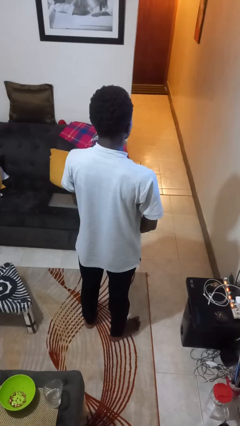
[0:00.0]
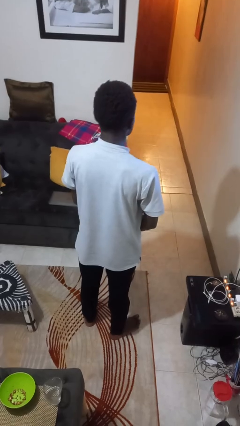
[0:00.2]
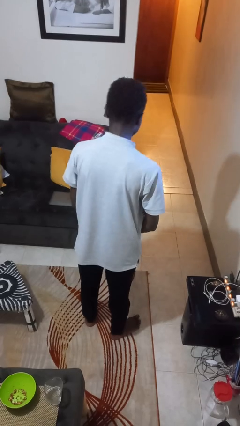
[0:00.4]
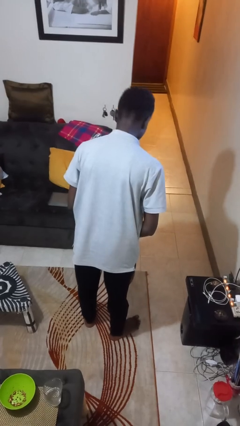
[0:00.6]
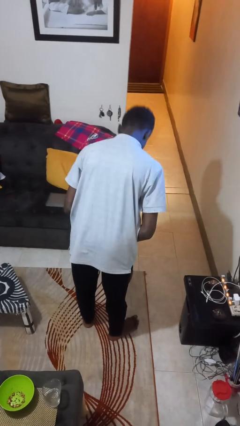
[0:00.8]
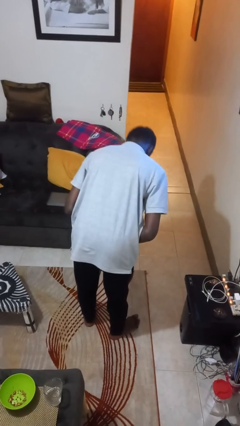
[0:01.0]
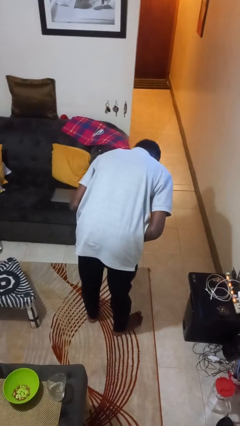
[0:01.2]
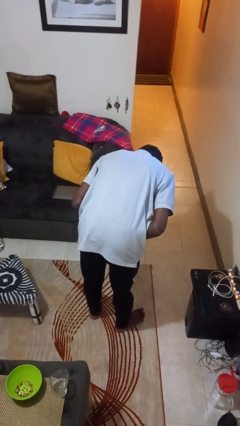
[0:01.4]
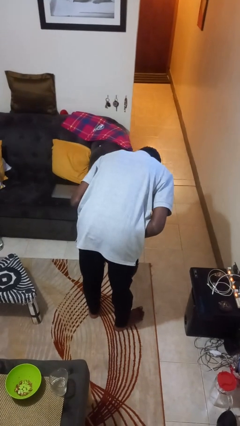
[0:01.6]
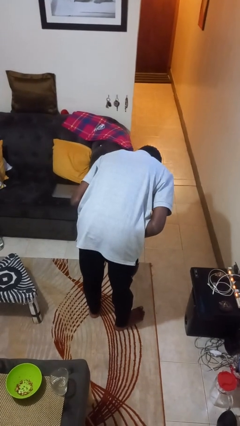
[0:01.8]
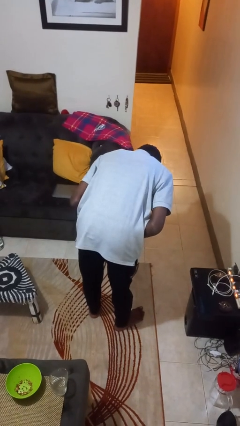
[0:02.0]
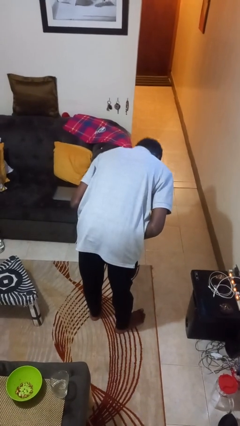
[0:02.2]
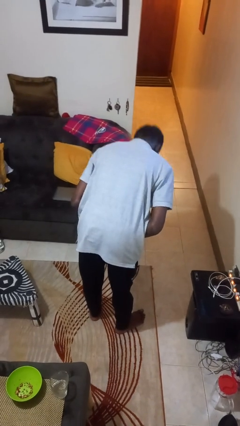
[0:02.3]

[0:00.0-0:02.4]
person bows

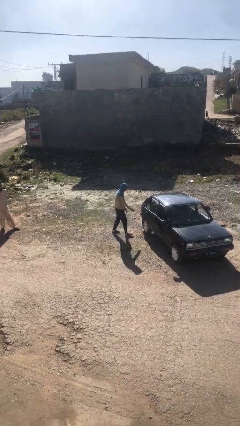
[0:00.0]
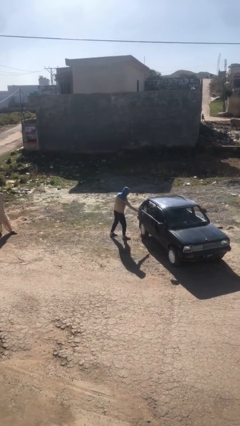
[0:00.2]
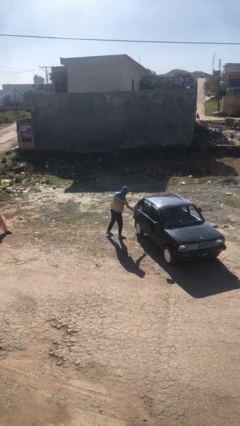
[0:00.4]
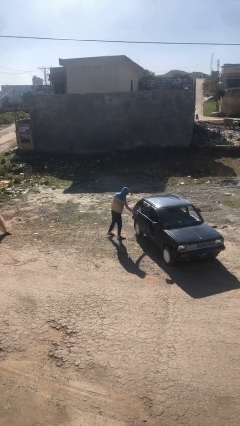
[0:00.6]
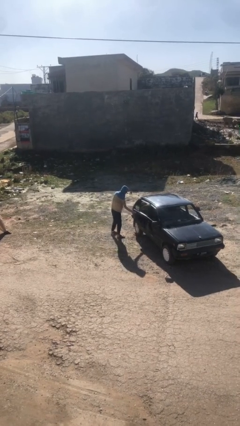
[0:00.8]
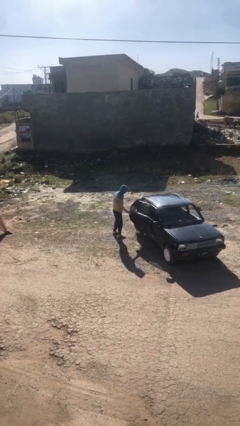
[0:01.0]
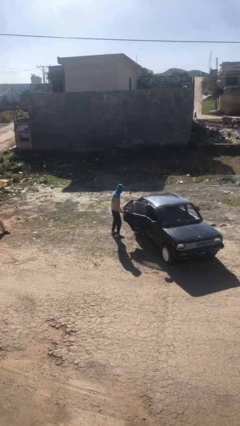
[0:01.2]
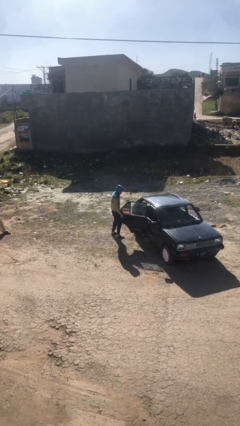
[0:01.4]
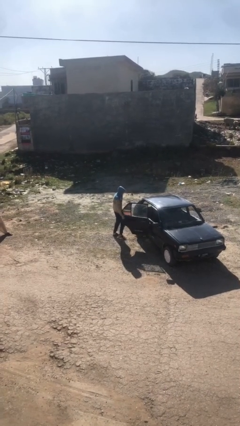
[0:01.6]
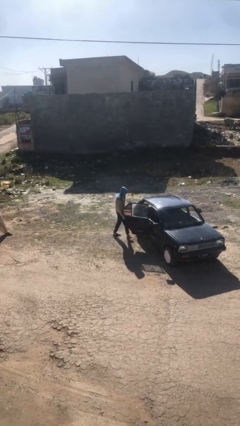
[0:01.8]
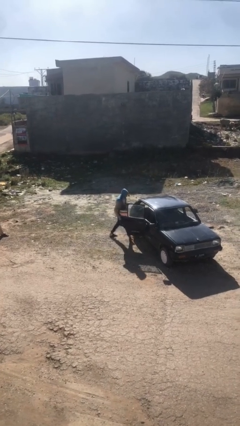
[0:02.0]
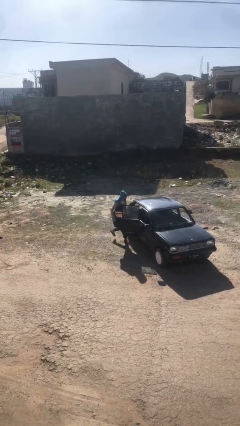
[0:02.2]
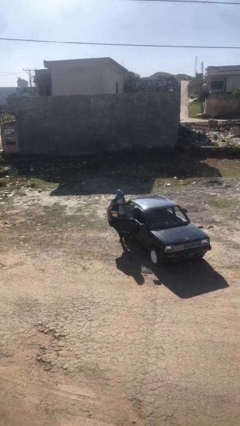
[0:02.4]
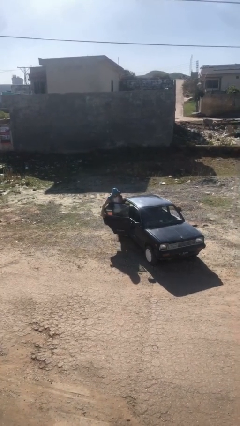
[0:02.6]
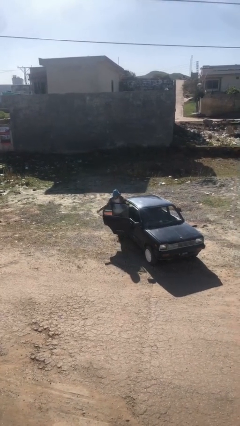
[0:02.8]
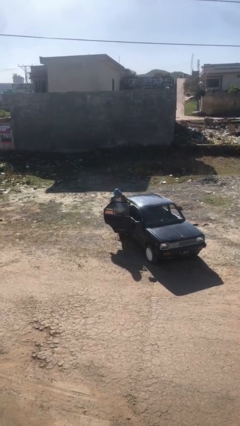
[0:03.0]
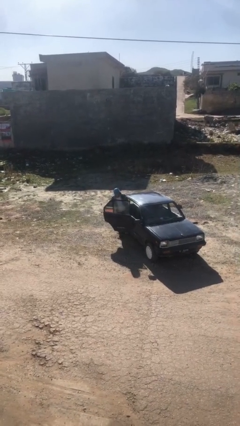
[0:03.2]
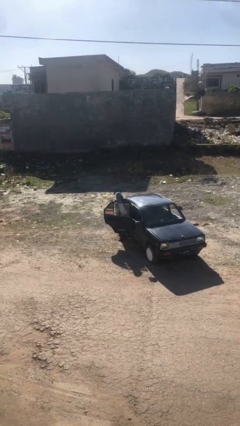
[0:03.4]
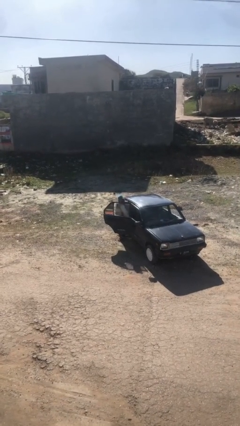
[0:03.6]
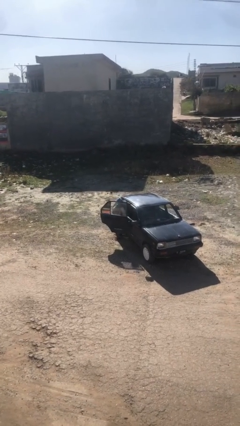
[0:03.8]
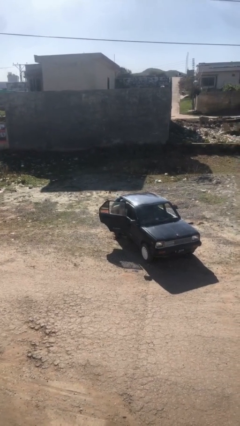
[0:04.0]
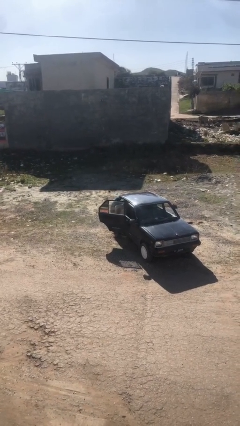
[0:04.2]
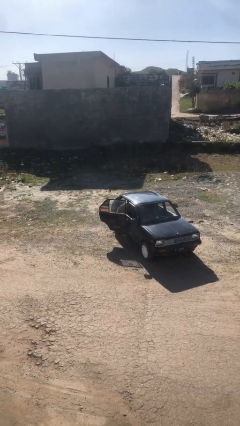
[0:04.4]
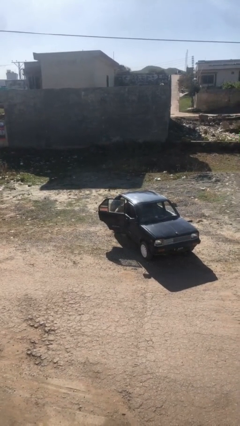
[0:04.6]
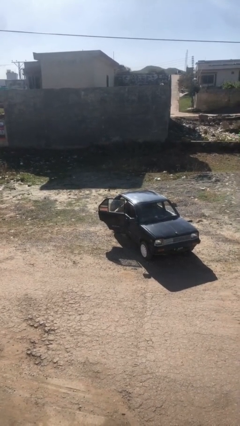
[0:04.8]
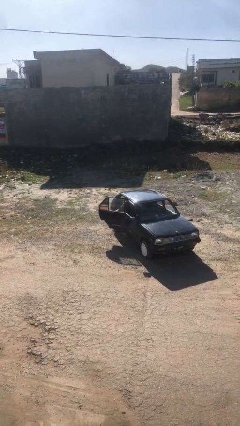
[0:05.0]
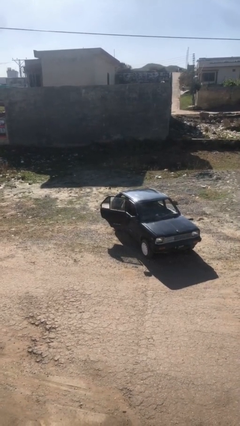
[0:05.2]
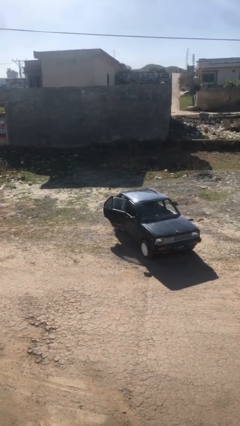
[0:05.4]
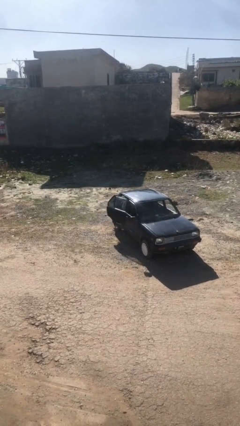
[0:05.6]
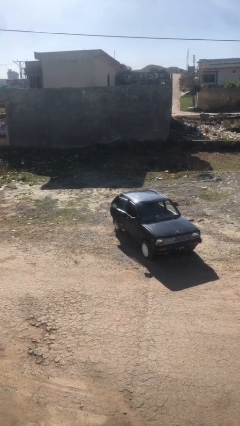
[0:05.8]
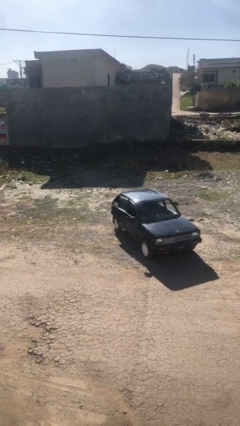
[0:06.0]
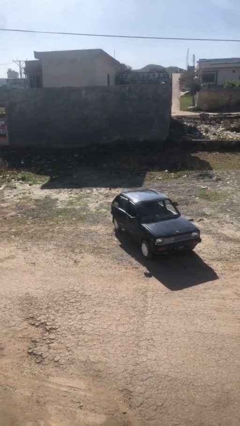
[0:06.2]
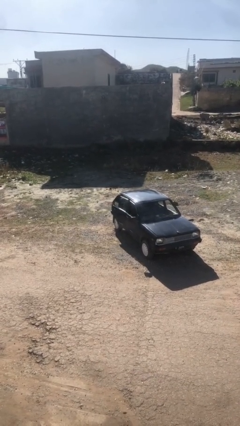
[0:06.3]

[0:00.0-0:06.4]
car picks up person

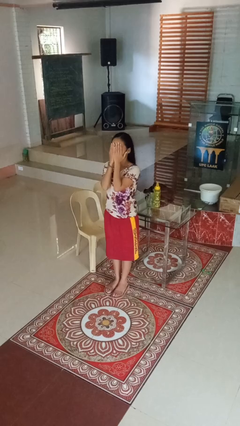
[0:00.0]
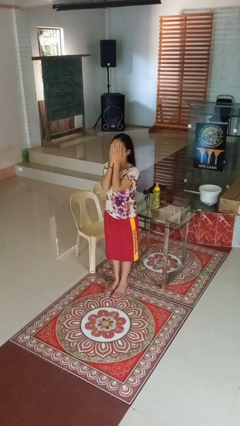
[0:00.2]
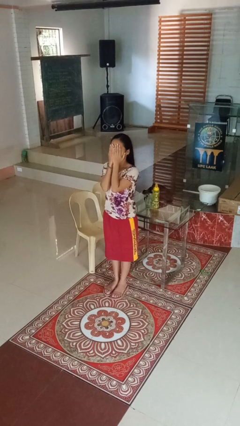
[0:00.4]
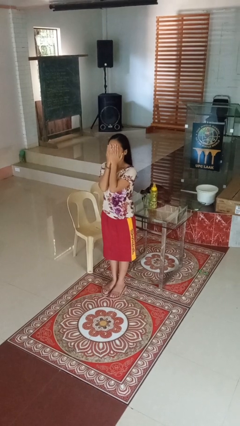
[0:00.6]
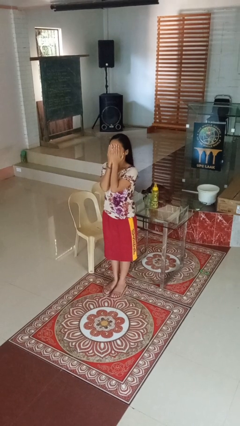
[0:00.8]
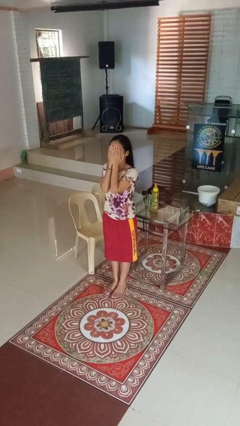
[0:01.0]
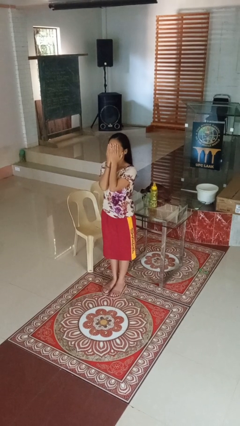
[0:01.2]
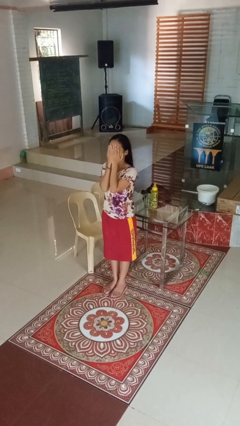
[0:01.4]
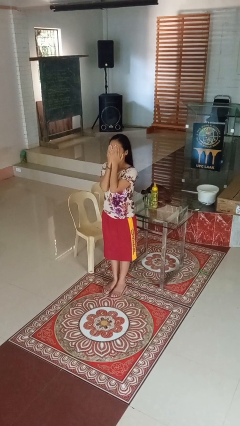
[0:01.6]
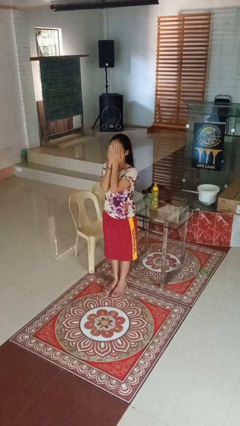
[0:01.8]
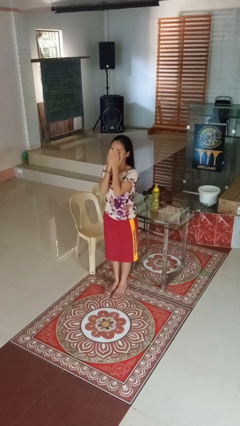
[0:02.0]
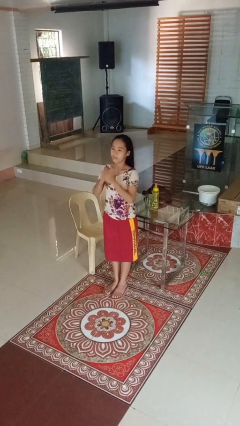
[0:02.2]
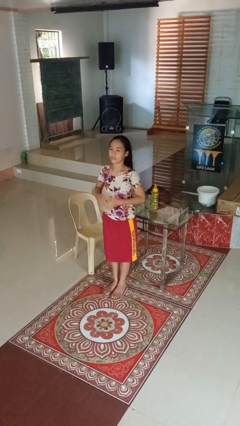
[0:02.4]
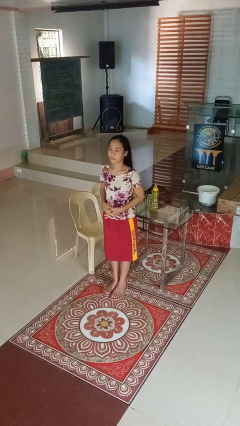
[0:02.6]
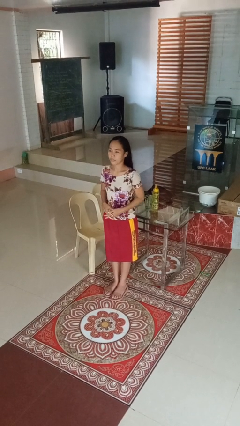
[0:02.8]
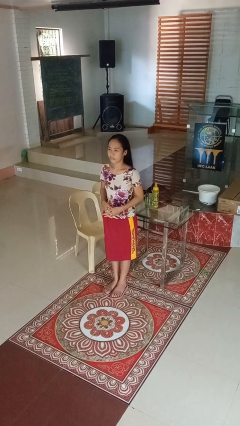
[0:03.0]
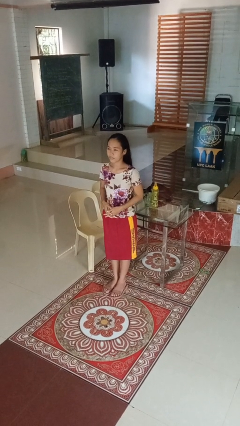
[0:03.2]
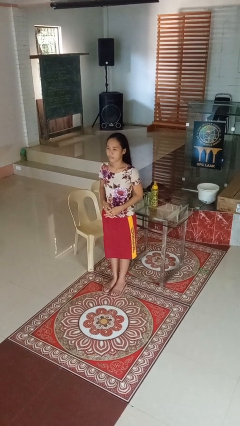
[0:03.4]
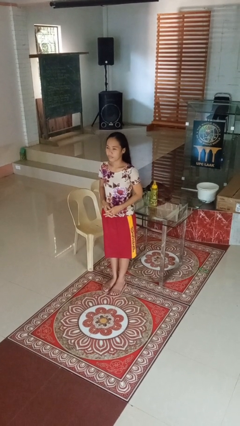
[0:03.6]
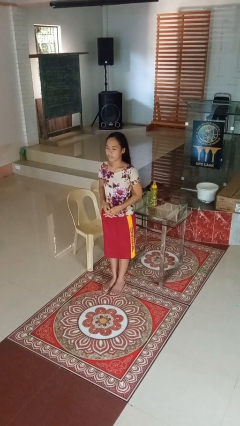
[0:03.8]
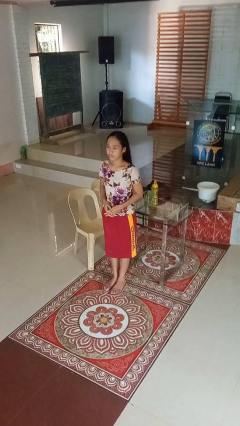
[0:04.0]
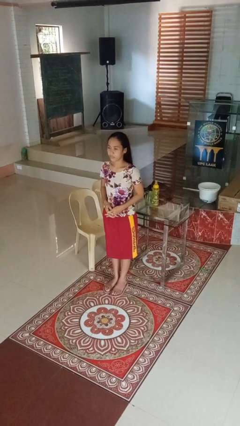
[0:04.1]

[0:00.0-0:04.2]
person covers face with hands

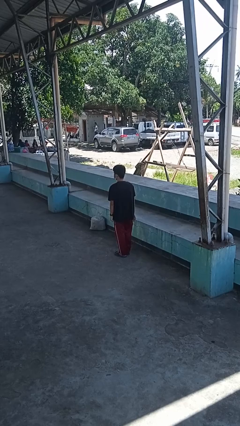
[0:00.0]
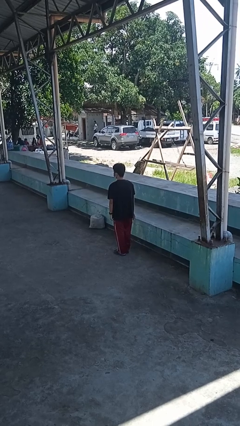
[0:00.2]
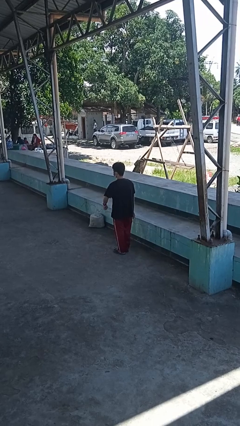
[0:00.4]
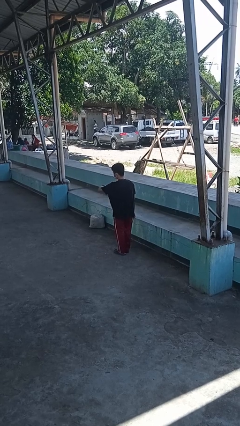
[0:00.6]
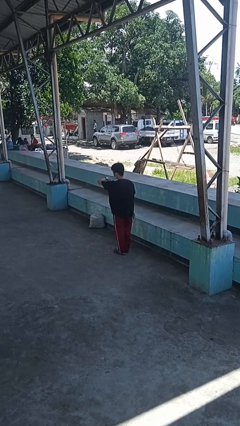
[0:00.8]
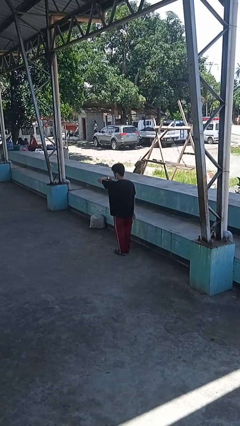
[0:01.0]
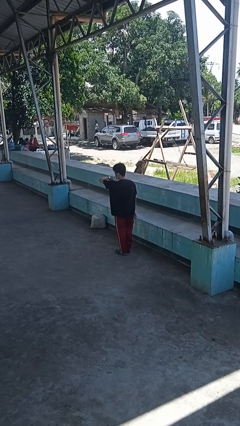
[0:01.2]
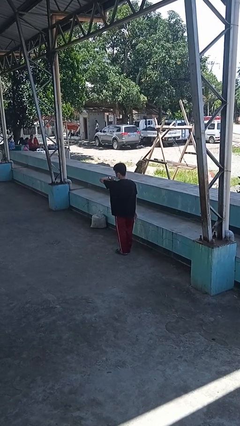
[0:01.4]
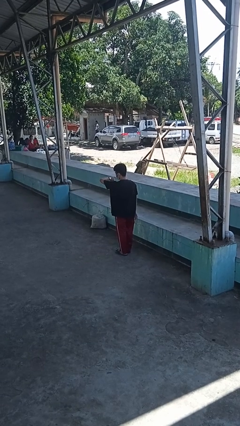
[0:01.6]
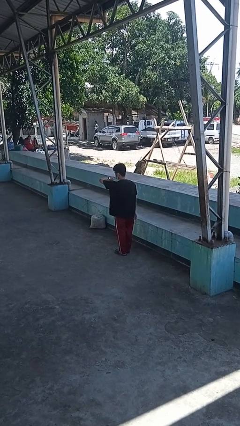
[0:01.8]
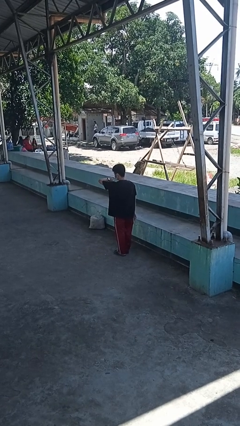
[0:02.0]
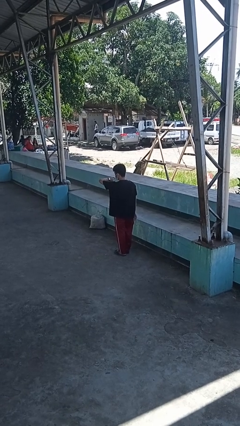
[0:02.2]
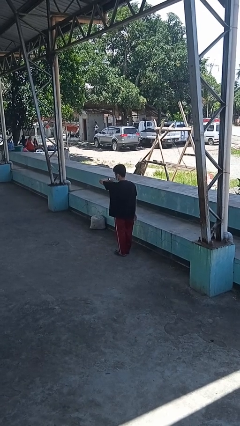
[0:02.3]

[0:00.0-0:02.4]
person looks at wristwatch

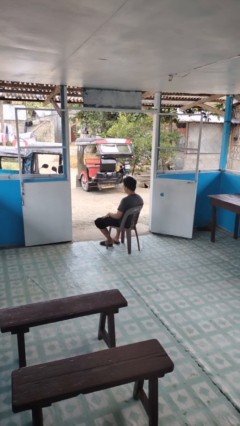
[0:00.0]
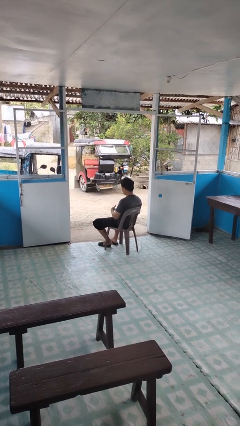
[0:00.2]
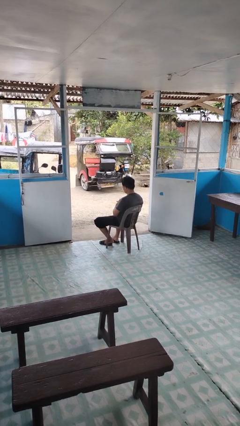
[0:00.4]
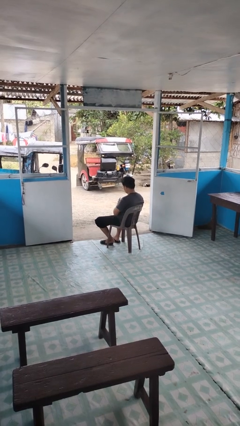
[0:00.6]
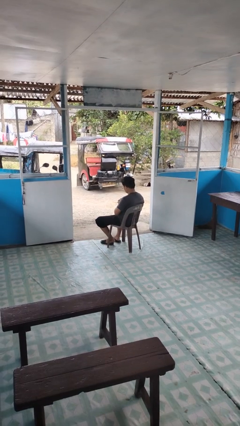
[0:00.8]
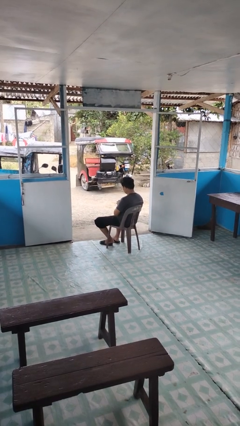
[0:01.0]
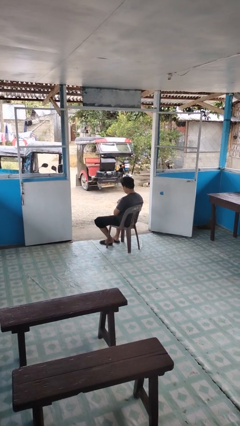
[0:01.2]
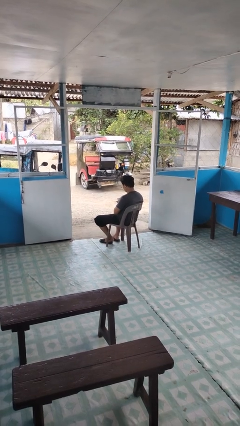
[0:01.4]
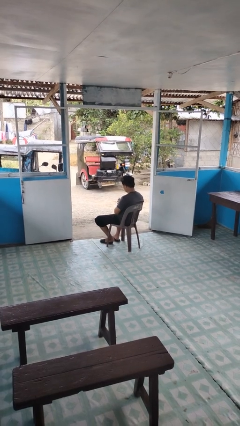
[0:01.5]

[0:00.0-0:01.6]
person looks at hands in lap

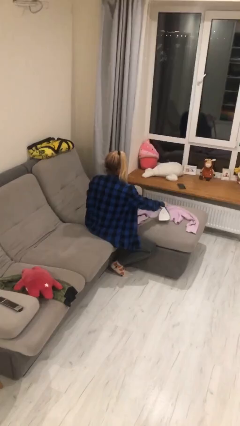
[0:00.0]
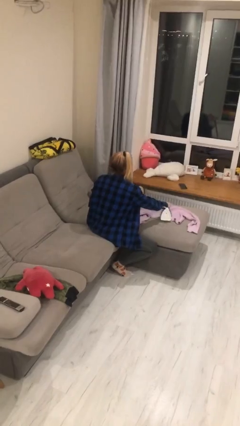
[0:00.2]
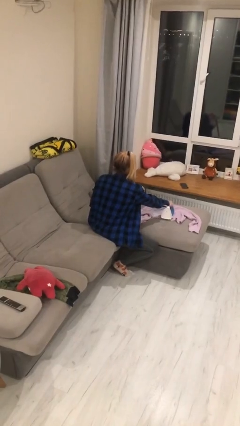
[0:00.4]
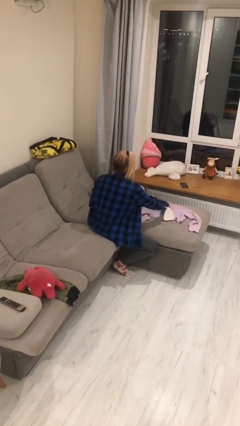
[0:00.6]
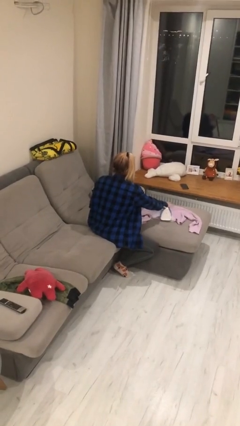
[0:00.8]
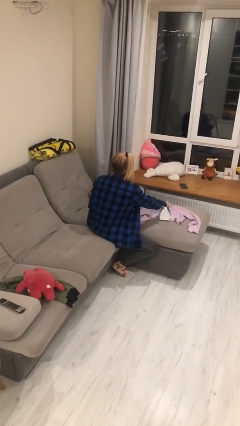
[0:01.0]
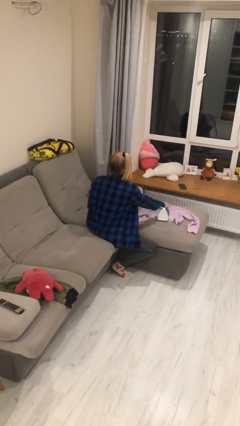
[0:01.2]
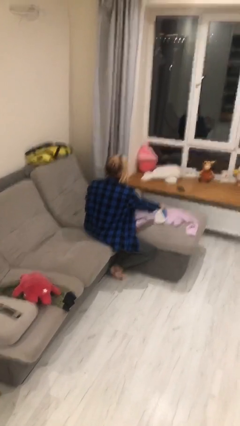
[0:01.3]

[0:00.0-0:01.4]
person irons clothes
